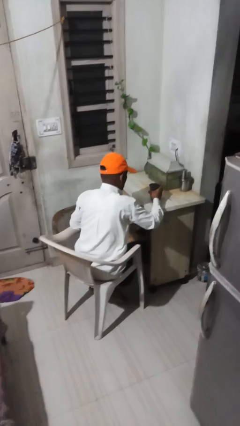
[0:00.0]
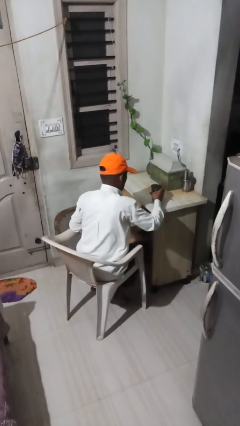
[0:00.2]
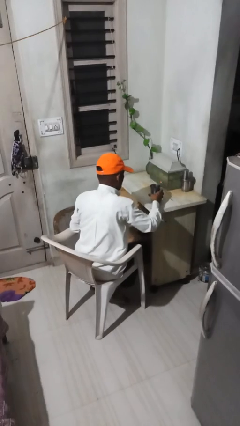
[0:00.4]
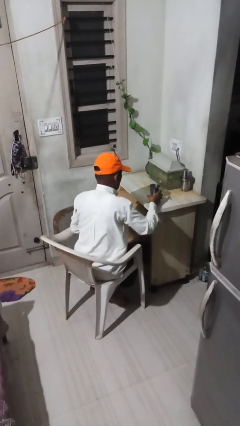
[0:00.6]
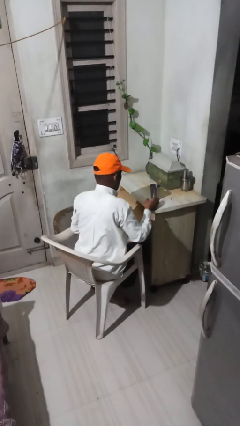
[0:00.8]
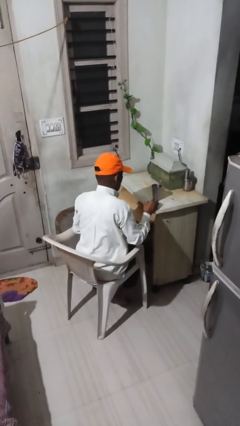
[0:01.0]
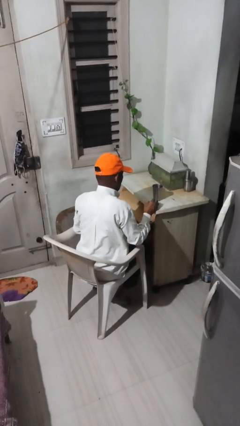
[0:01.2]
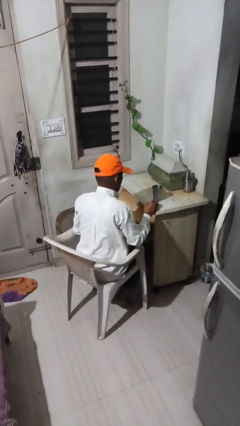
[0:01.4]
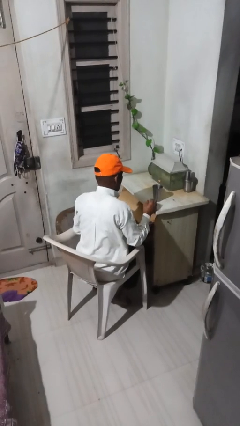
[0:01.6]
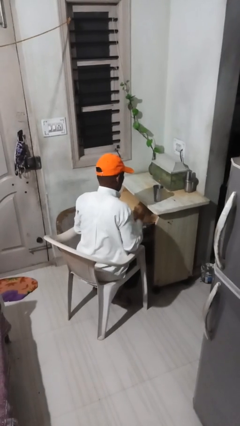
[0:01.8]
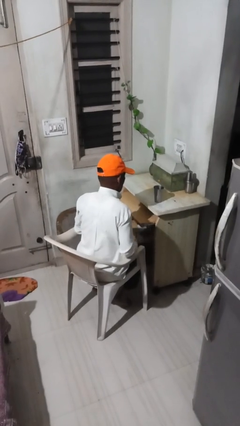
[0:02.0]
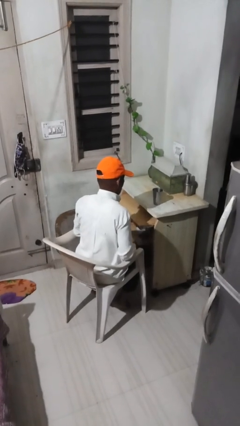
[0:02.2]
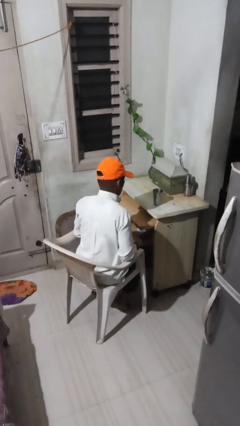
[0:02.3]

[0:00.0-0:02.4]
person sets upright glass

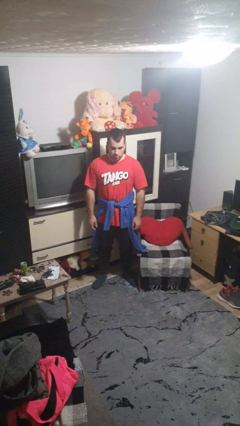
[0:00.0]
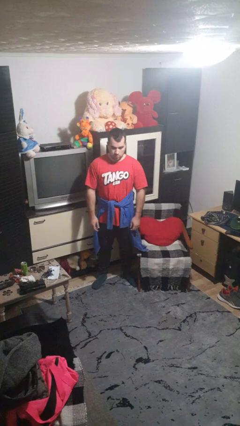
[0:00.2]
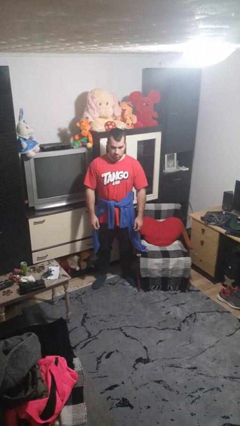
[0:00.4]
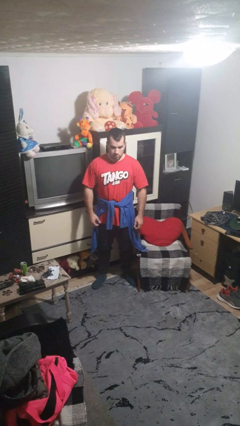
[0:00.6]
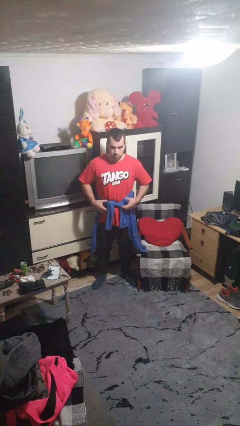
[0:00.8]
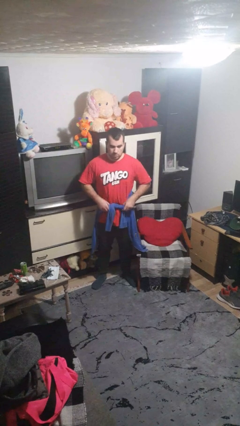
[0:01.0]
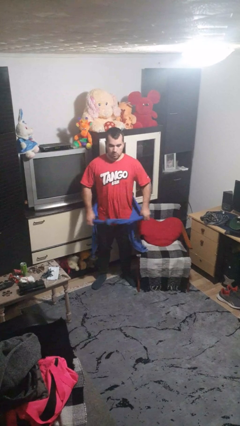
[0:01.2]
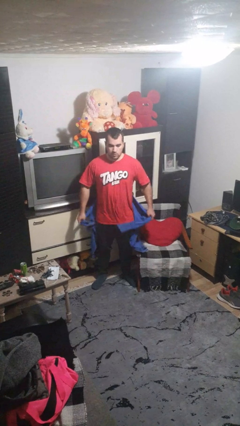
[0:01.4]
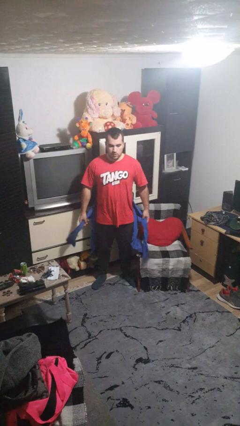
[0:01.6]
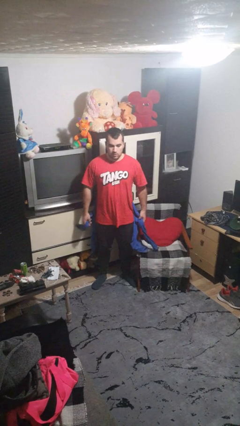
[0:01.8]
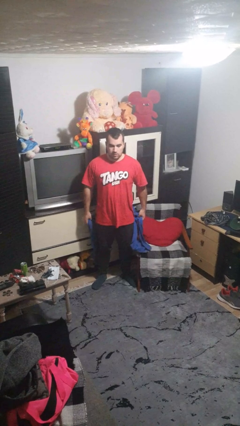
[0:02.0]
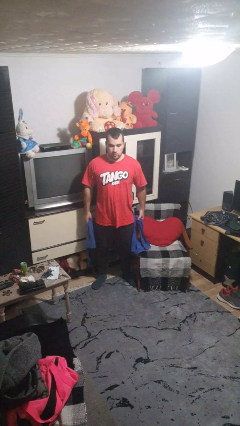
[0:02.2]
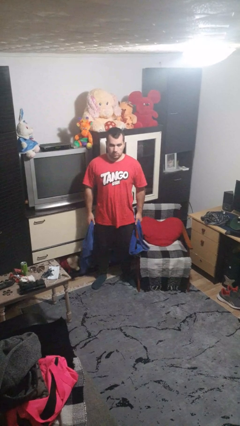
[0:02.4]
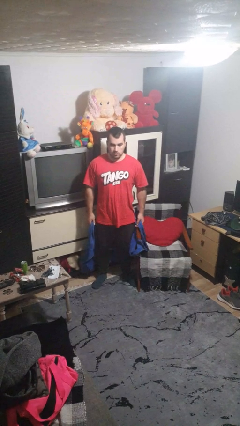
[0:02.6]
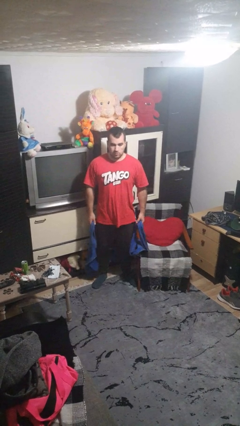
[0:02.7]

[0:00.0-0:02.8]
person unties jacket around waist

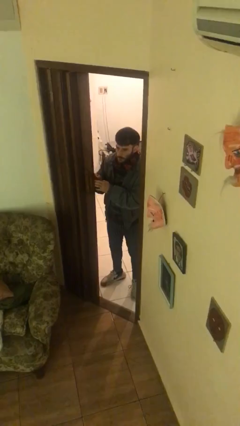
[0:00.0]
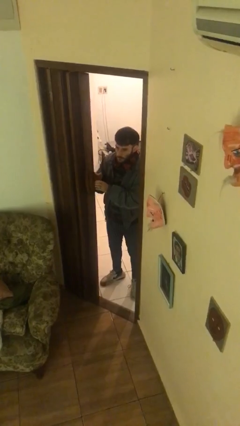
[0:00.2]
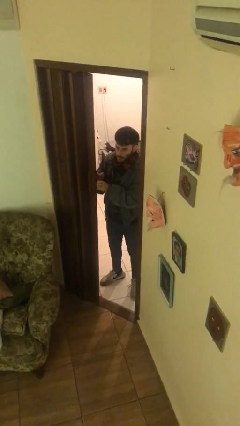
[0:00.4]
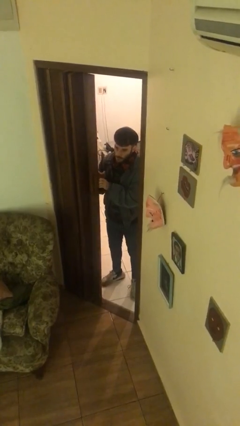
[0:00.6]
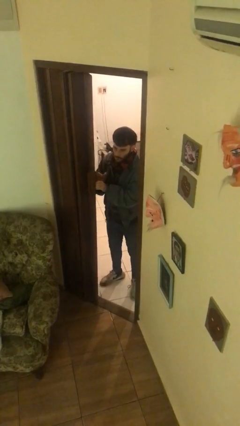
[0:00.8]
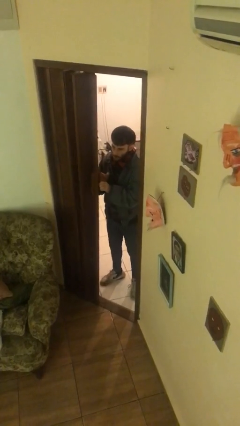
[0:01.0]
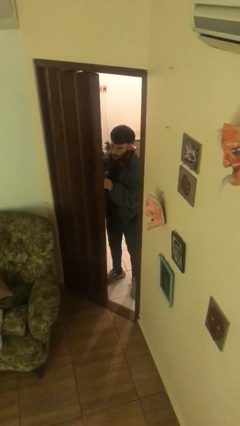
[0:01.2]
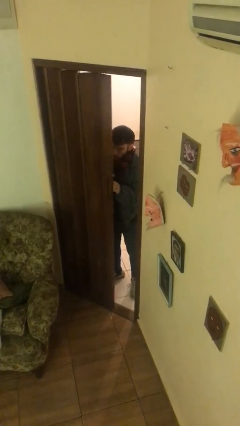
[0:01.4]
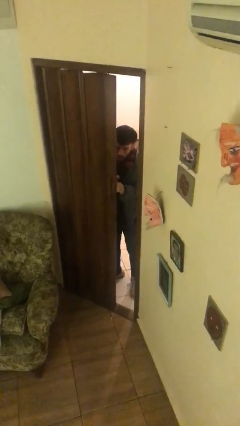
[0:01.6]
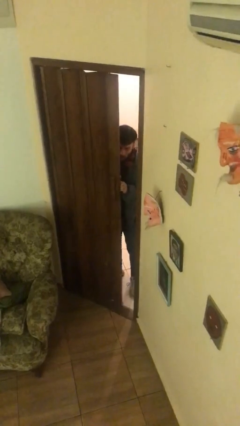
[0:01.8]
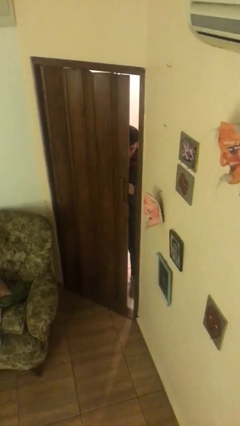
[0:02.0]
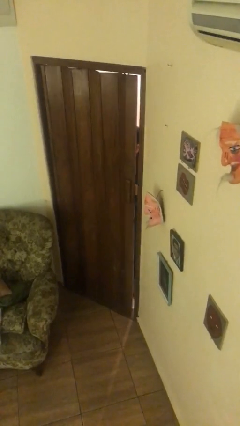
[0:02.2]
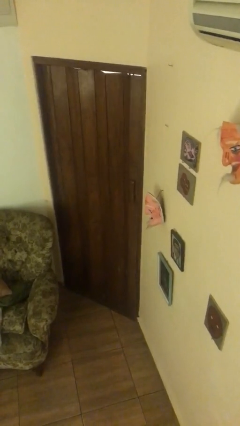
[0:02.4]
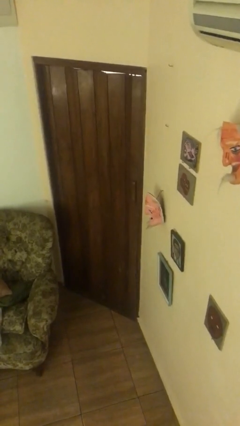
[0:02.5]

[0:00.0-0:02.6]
person closes sliding door

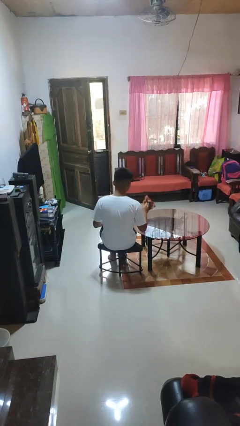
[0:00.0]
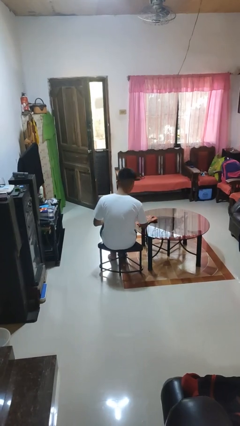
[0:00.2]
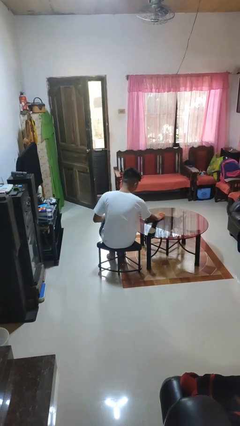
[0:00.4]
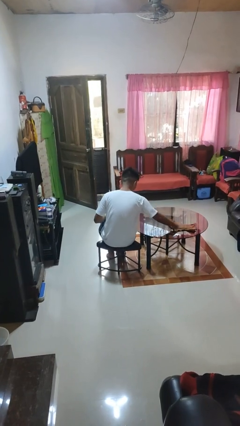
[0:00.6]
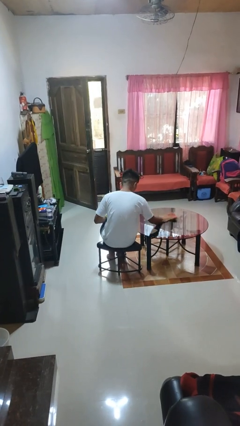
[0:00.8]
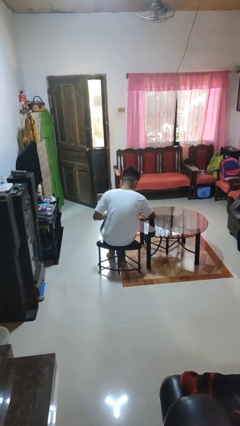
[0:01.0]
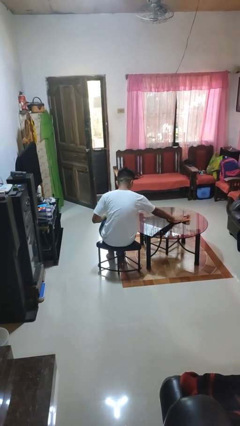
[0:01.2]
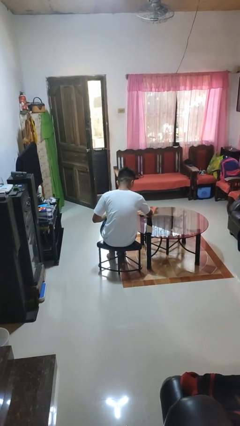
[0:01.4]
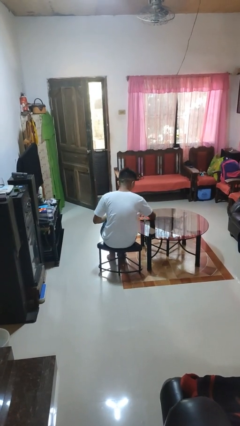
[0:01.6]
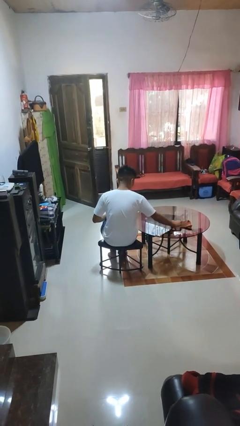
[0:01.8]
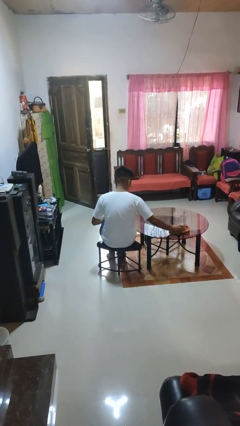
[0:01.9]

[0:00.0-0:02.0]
person cleans table with rag

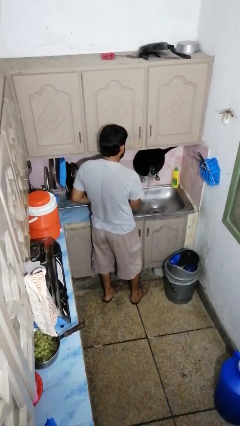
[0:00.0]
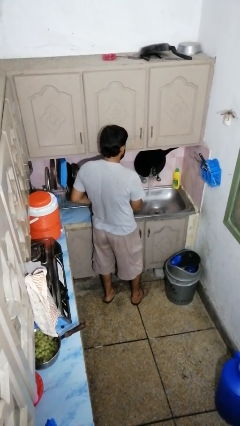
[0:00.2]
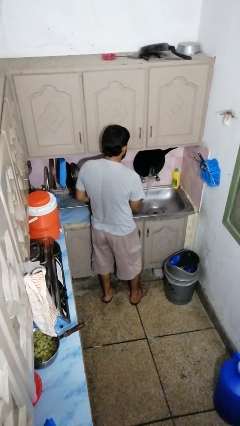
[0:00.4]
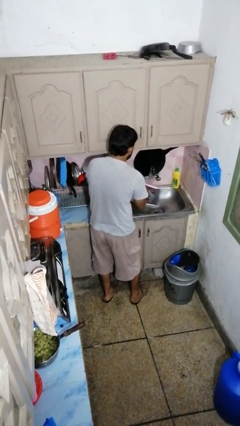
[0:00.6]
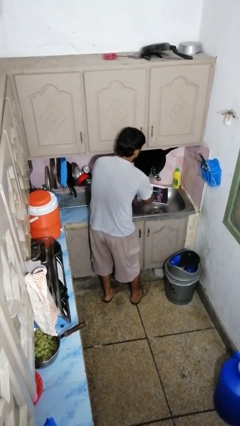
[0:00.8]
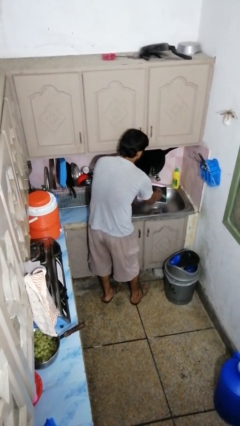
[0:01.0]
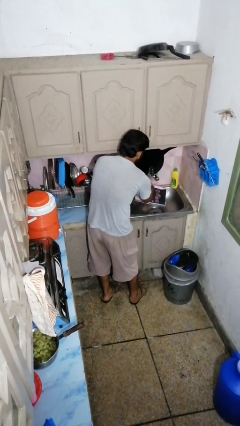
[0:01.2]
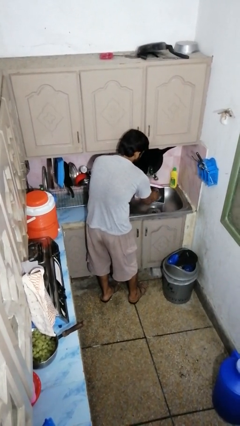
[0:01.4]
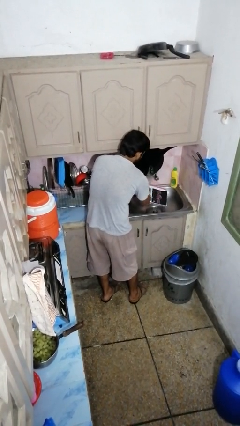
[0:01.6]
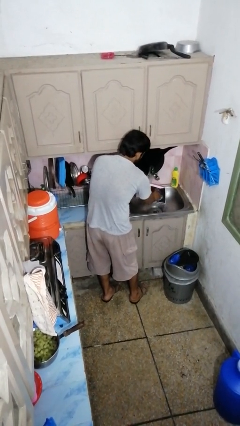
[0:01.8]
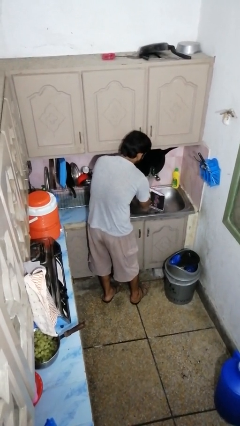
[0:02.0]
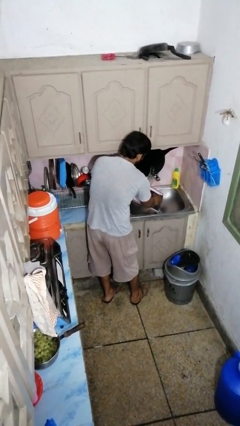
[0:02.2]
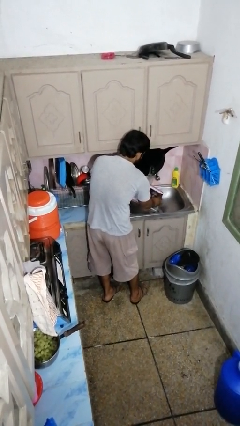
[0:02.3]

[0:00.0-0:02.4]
person washes dish

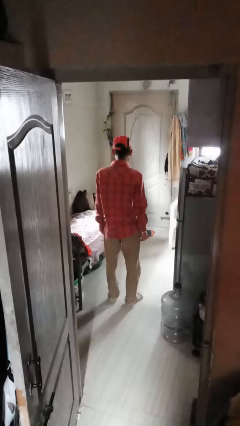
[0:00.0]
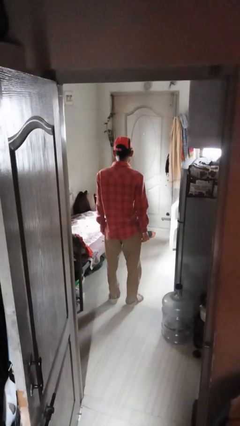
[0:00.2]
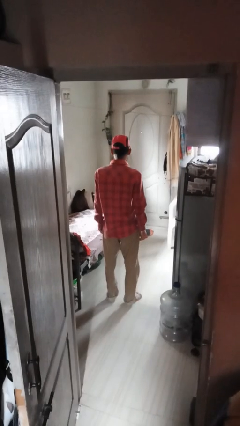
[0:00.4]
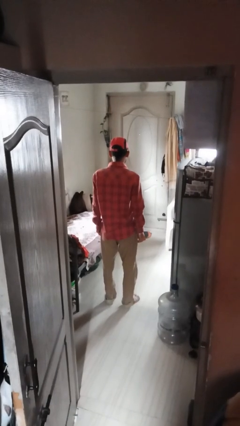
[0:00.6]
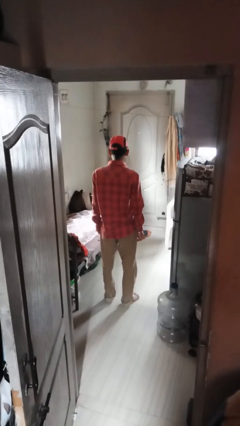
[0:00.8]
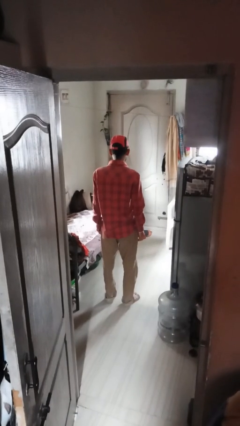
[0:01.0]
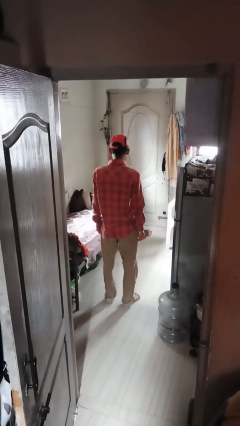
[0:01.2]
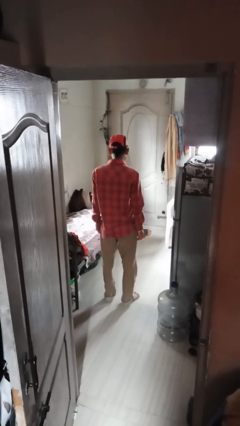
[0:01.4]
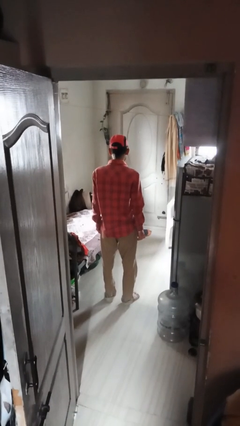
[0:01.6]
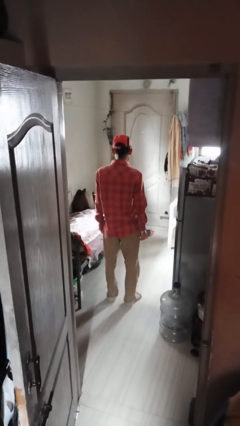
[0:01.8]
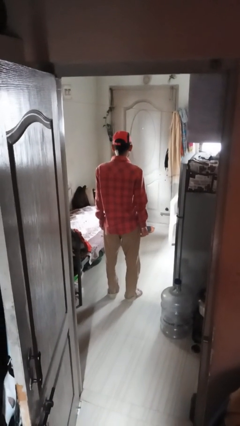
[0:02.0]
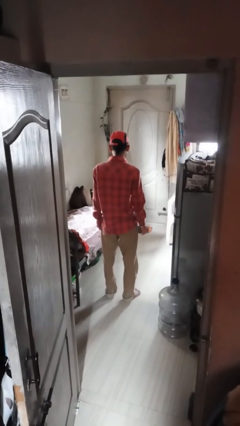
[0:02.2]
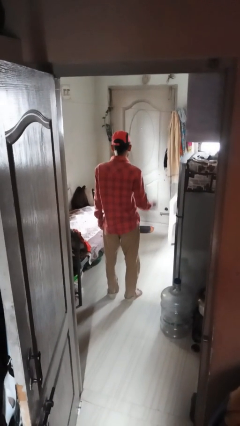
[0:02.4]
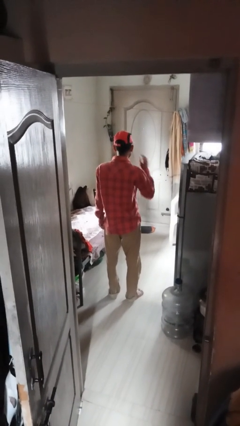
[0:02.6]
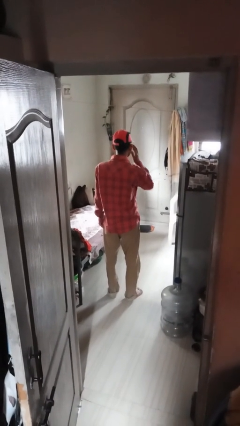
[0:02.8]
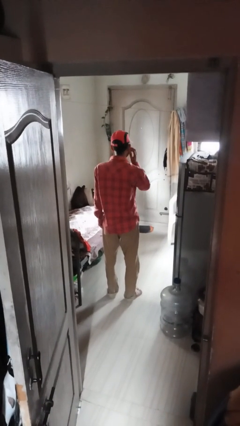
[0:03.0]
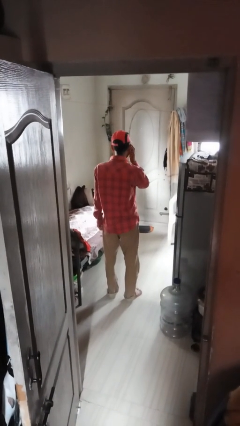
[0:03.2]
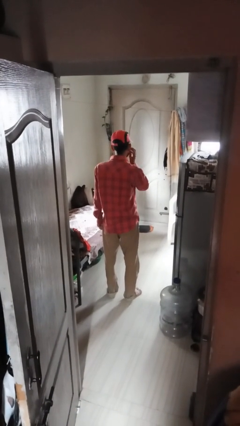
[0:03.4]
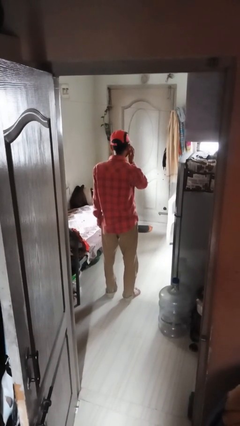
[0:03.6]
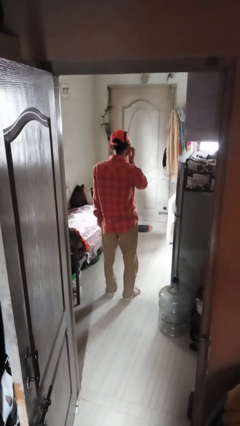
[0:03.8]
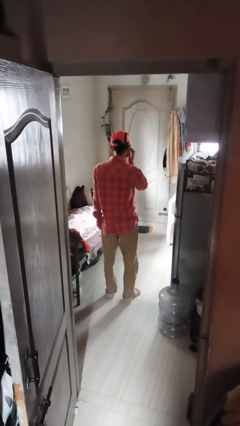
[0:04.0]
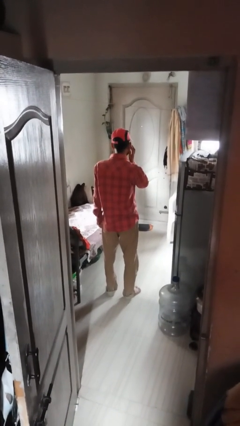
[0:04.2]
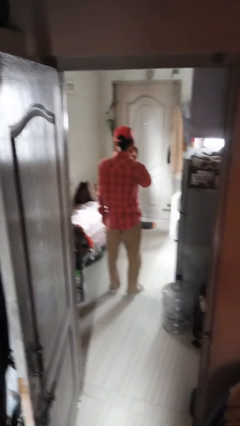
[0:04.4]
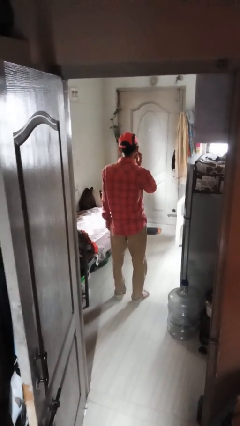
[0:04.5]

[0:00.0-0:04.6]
person scratches face

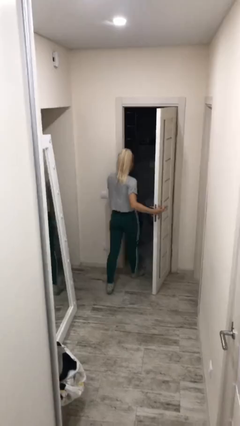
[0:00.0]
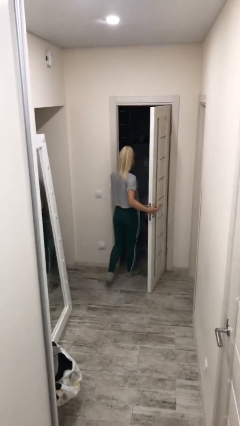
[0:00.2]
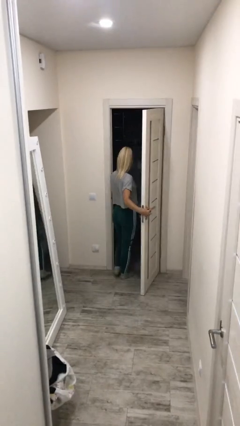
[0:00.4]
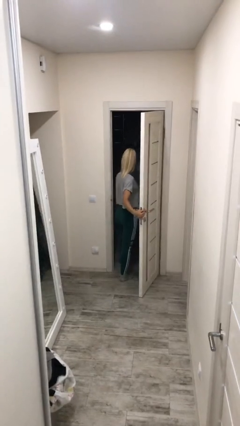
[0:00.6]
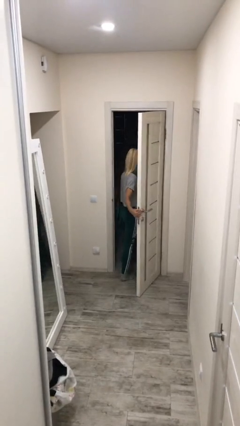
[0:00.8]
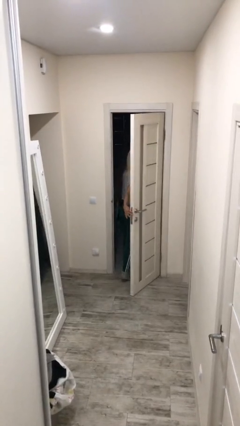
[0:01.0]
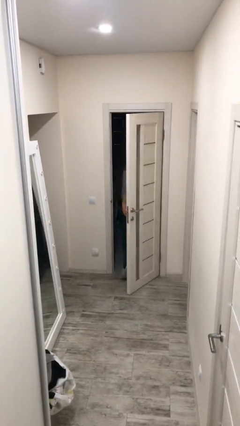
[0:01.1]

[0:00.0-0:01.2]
person exits scene through structure
